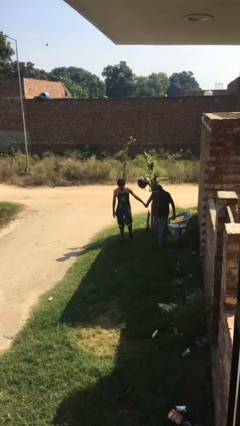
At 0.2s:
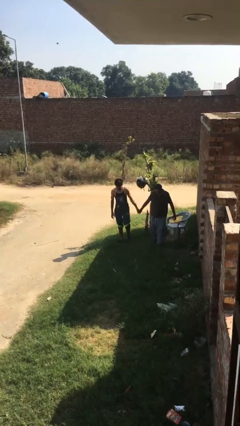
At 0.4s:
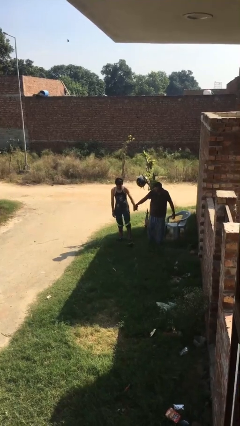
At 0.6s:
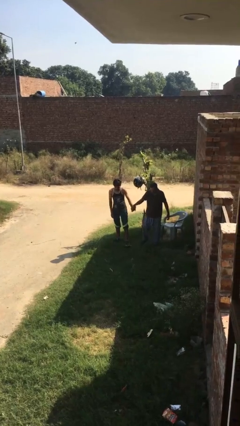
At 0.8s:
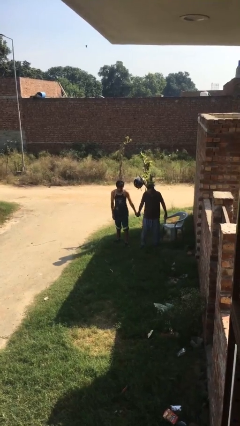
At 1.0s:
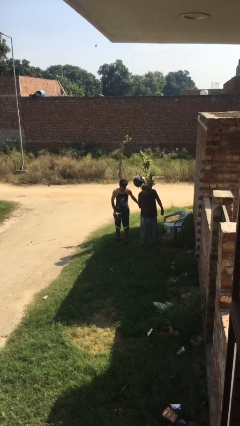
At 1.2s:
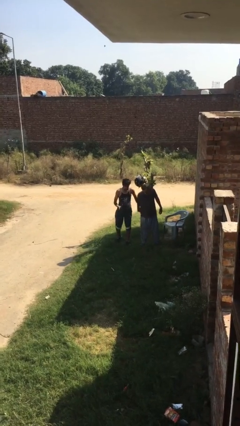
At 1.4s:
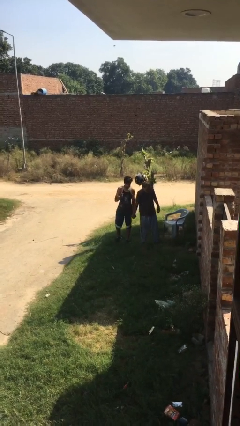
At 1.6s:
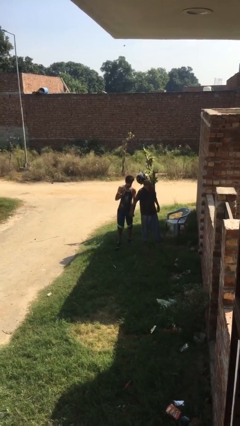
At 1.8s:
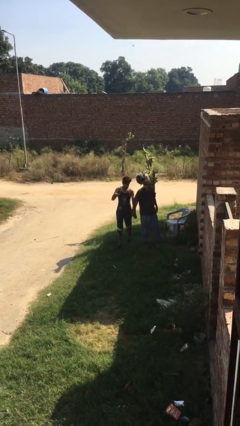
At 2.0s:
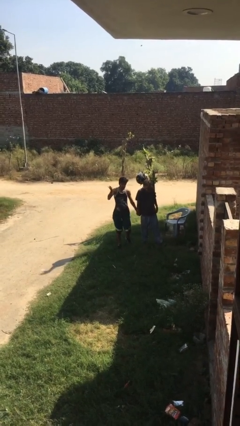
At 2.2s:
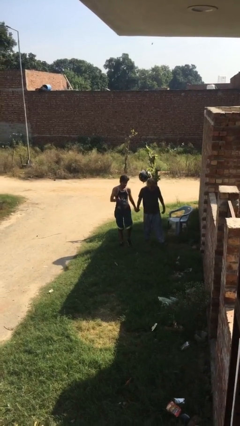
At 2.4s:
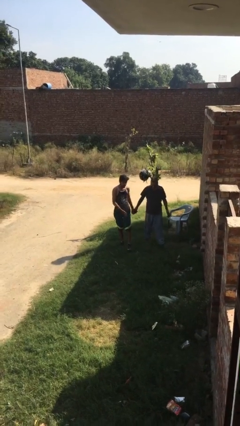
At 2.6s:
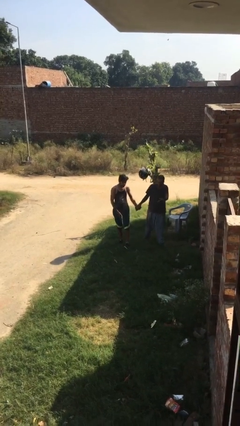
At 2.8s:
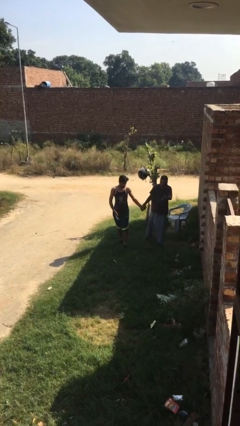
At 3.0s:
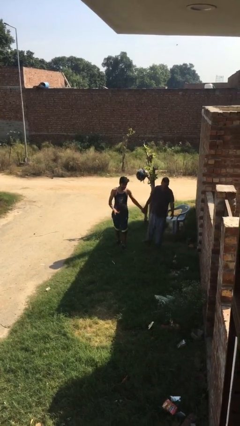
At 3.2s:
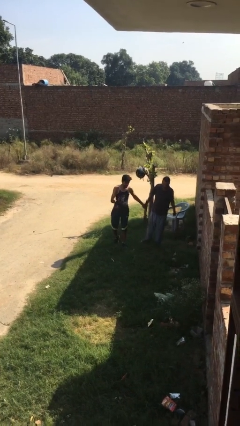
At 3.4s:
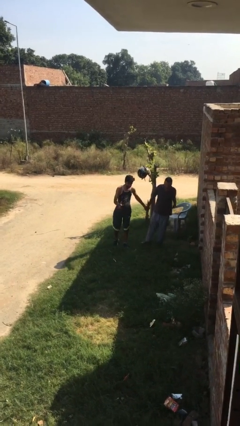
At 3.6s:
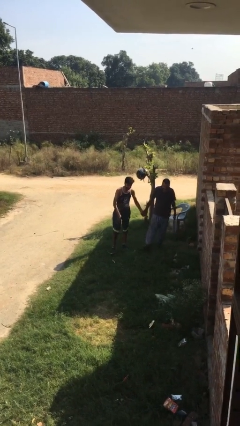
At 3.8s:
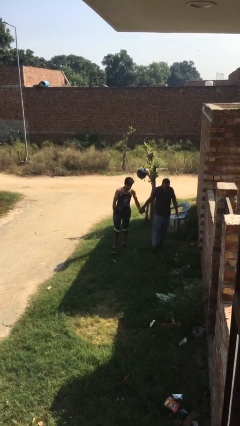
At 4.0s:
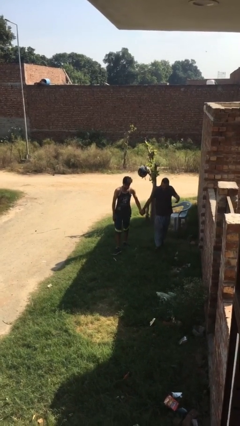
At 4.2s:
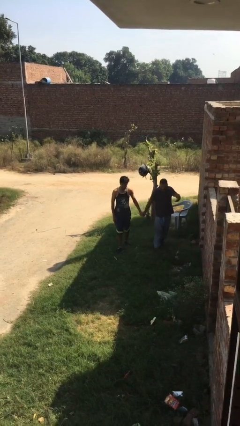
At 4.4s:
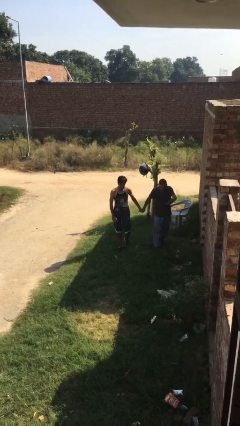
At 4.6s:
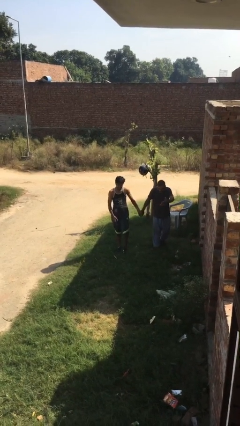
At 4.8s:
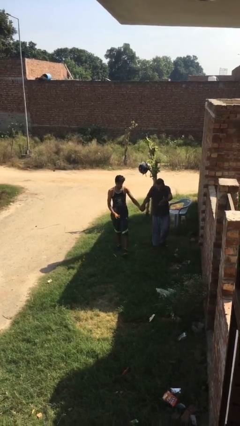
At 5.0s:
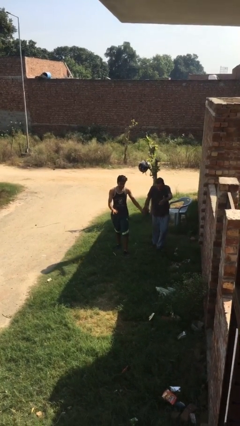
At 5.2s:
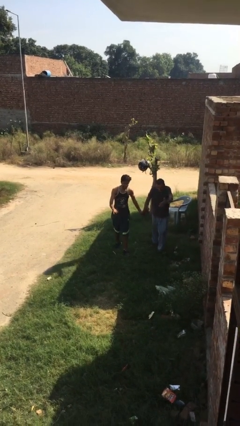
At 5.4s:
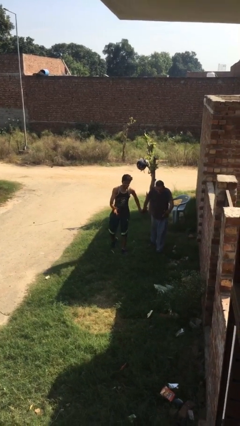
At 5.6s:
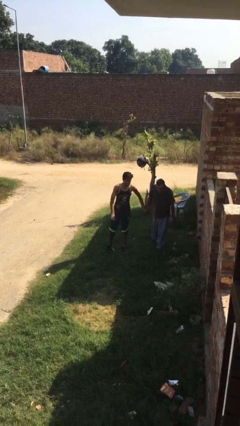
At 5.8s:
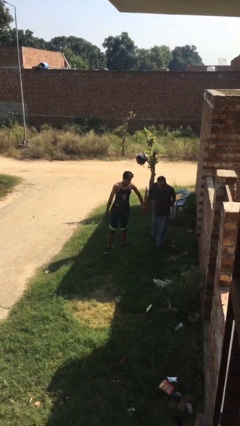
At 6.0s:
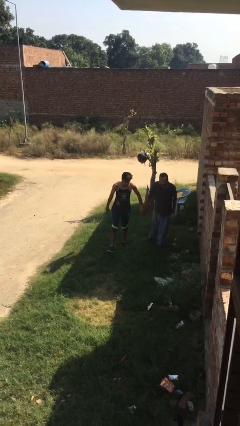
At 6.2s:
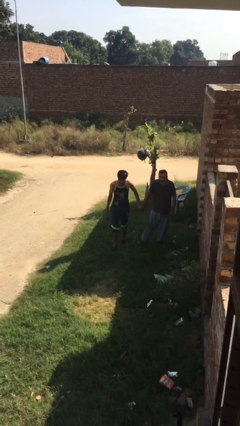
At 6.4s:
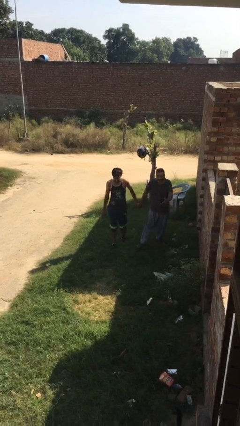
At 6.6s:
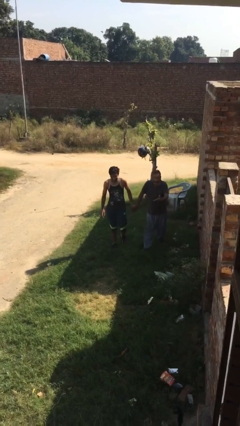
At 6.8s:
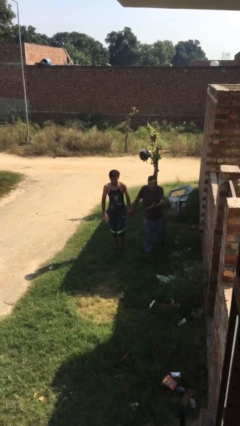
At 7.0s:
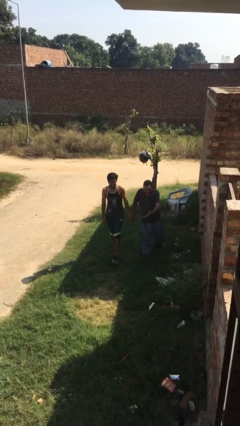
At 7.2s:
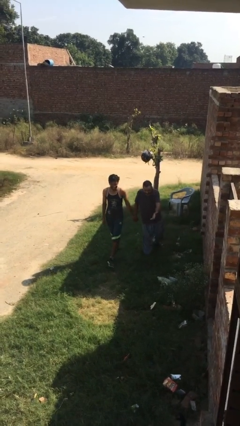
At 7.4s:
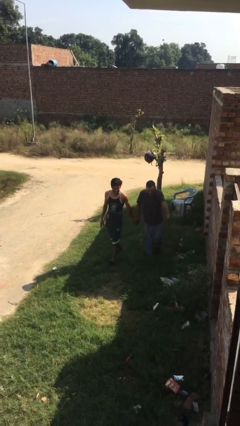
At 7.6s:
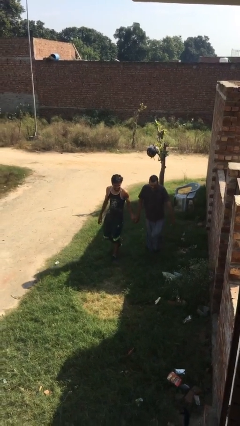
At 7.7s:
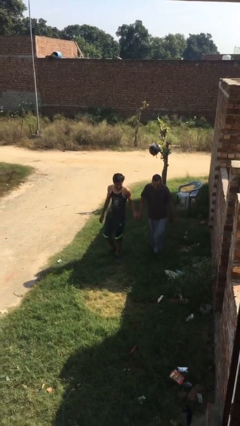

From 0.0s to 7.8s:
person holds hand

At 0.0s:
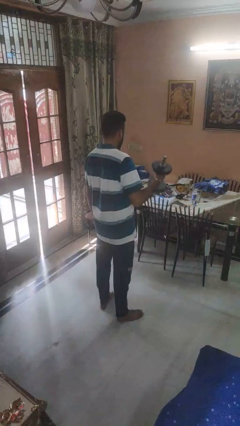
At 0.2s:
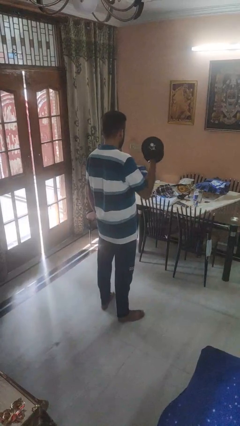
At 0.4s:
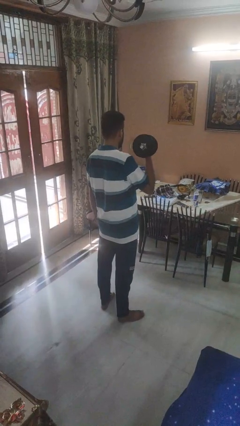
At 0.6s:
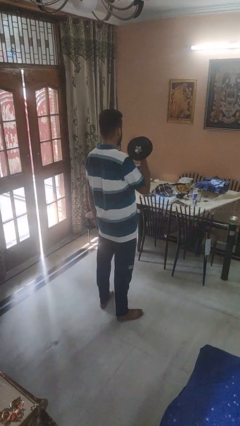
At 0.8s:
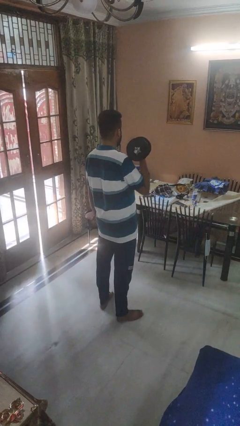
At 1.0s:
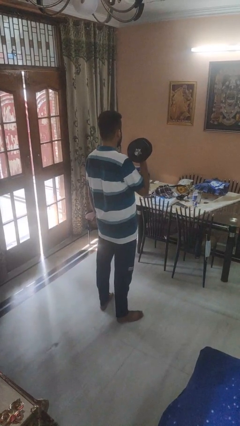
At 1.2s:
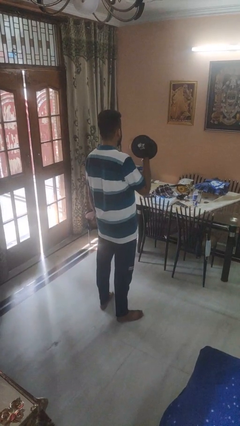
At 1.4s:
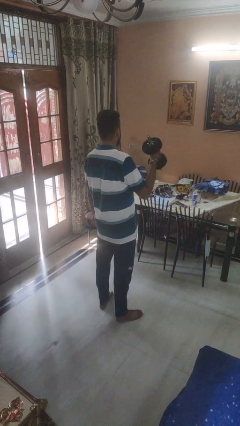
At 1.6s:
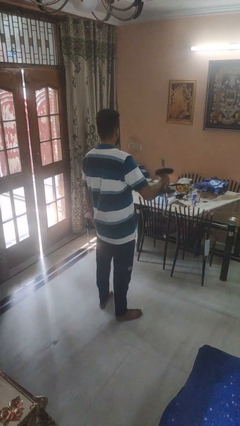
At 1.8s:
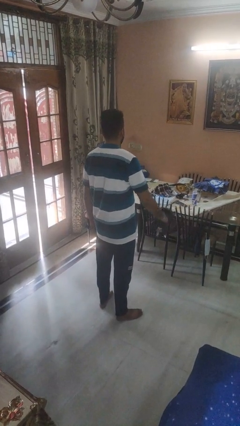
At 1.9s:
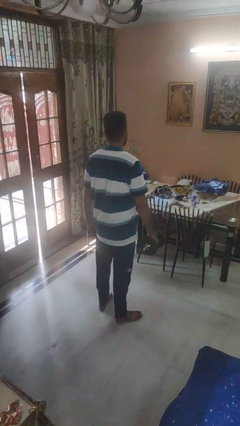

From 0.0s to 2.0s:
person lifts dumbbells

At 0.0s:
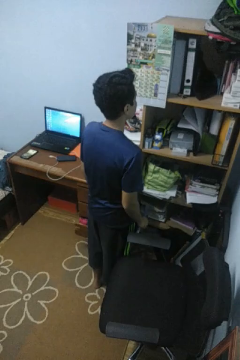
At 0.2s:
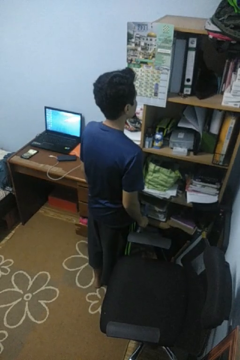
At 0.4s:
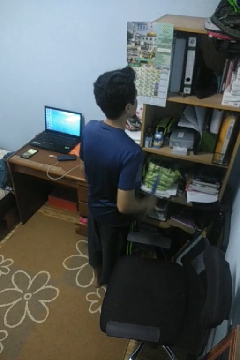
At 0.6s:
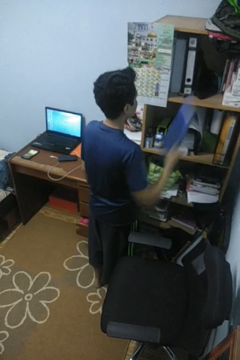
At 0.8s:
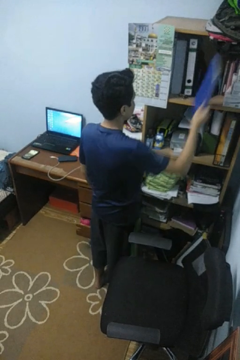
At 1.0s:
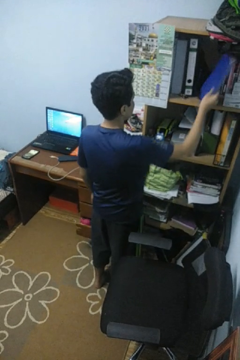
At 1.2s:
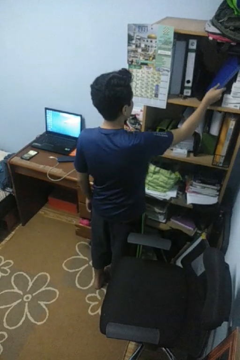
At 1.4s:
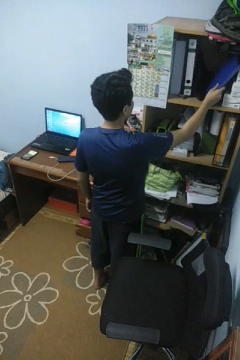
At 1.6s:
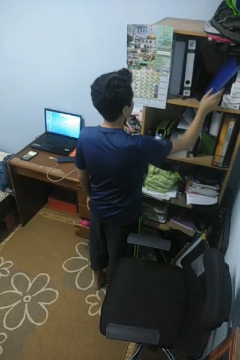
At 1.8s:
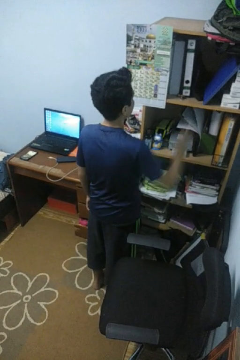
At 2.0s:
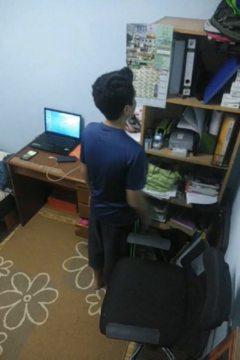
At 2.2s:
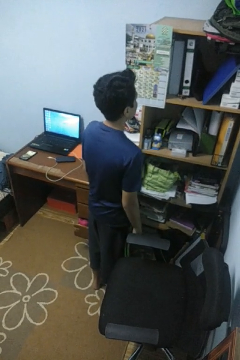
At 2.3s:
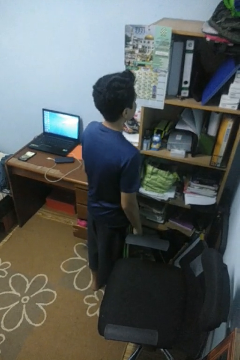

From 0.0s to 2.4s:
person puts down object into cabinet

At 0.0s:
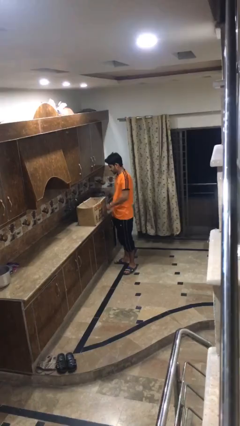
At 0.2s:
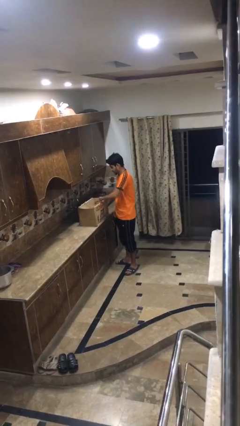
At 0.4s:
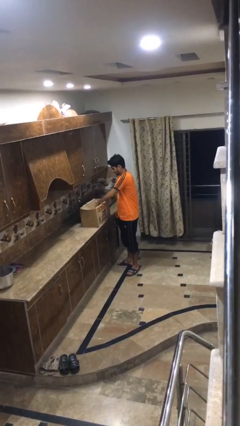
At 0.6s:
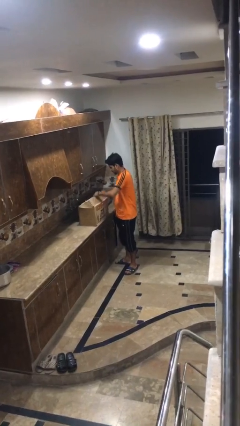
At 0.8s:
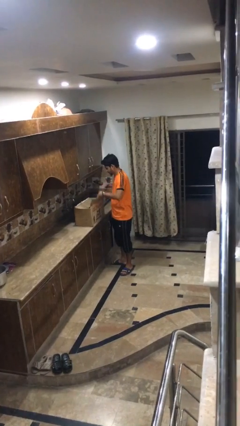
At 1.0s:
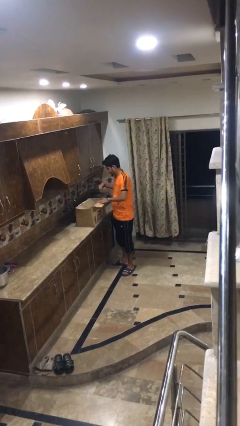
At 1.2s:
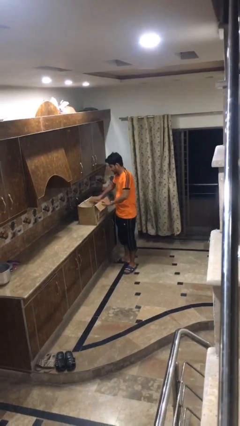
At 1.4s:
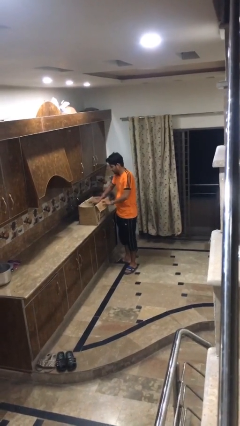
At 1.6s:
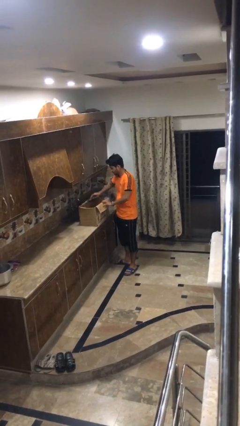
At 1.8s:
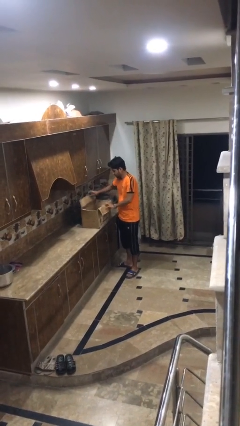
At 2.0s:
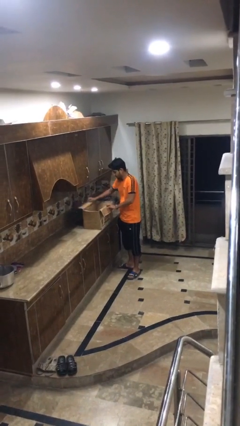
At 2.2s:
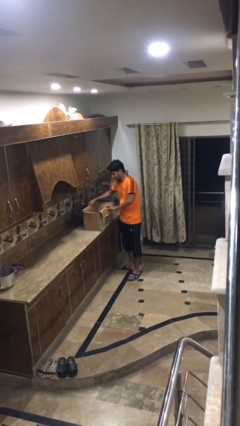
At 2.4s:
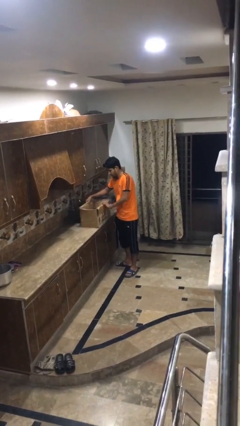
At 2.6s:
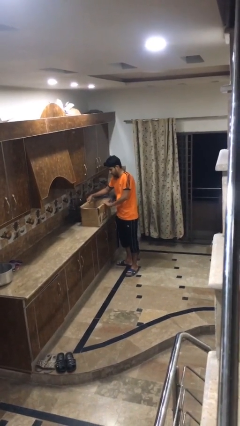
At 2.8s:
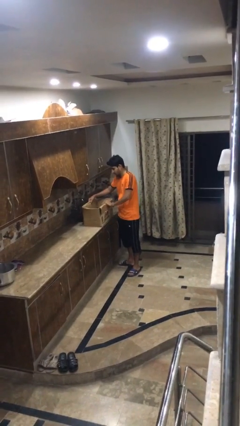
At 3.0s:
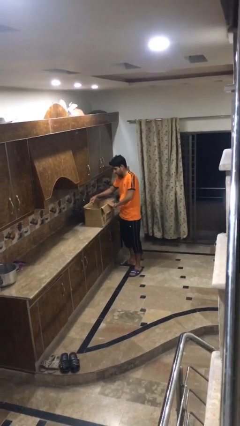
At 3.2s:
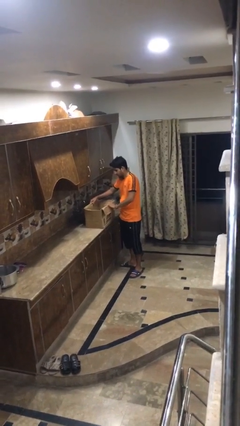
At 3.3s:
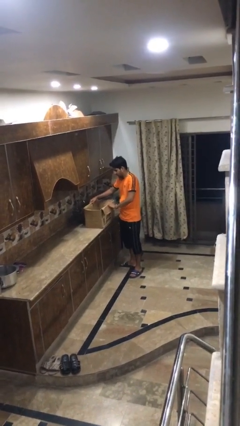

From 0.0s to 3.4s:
person opens box

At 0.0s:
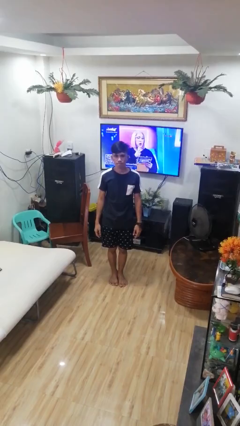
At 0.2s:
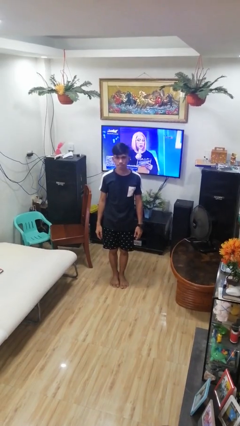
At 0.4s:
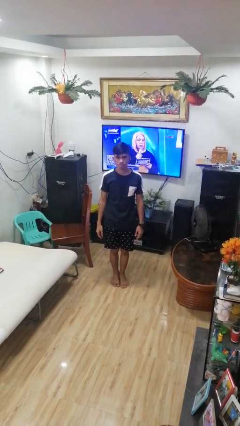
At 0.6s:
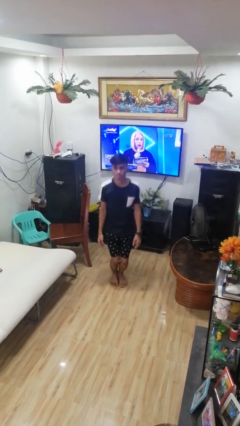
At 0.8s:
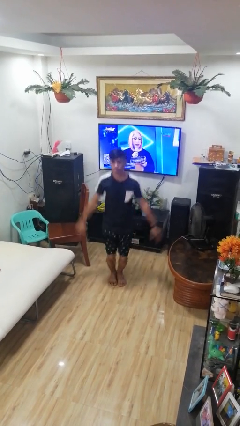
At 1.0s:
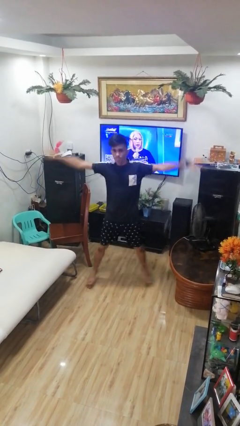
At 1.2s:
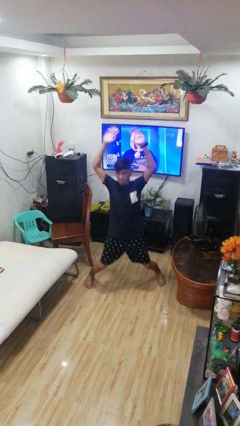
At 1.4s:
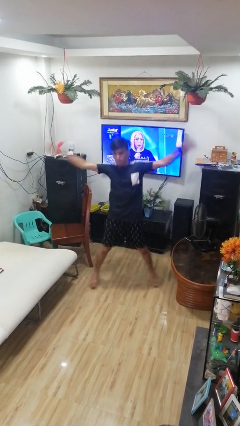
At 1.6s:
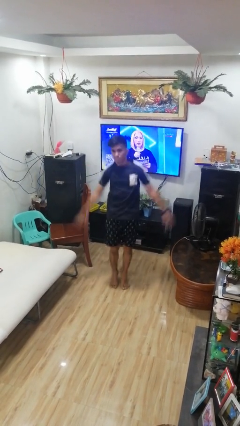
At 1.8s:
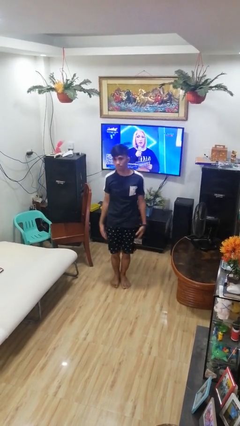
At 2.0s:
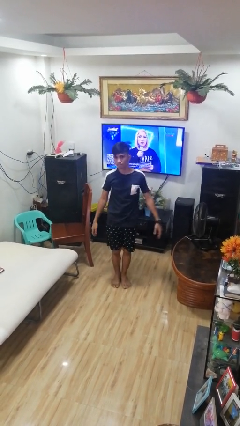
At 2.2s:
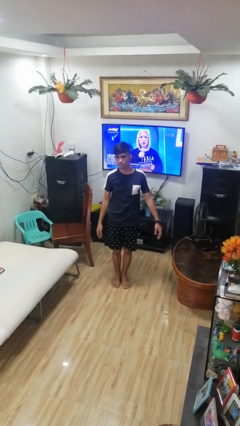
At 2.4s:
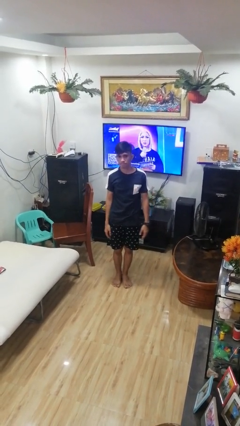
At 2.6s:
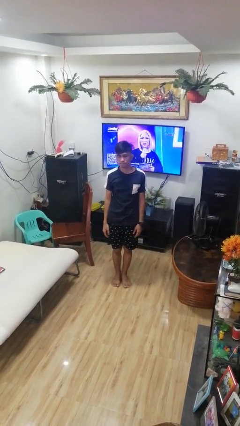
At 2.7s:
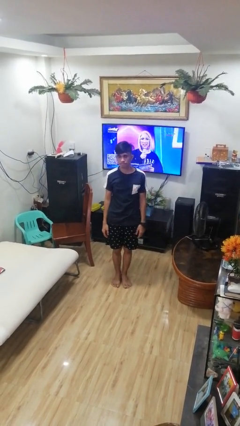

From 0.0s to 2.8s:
person exercises with jumping jacks
